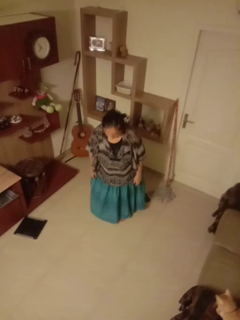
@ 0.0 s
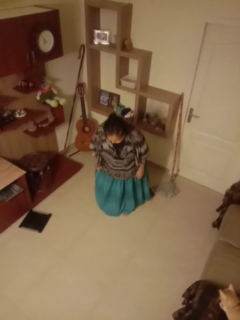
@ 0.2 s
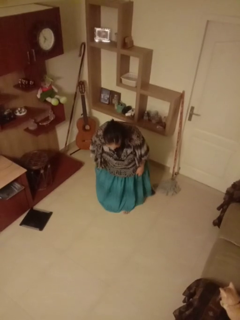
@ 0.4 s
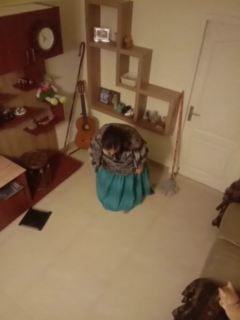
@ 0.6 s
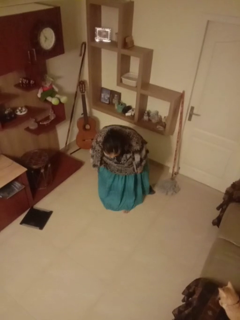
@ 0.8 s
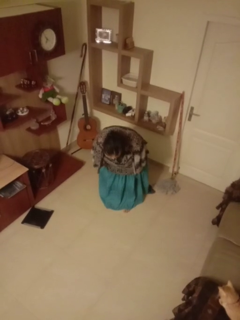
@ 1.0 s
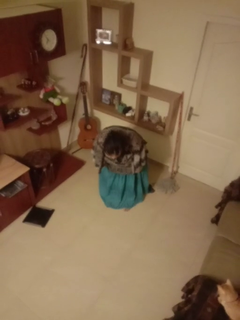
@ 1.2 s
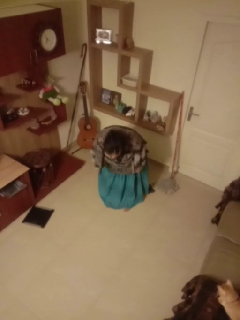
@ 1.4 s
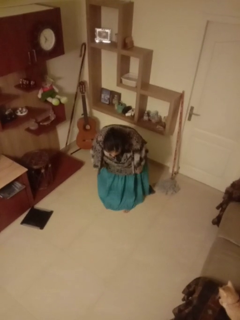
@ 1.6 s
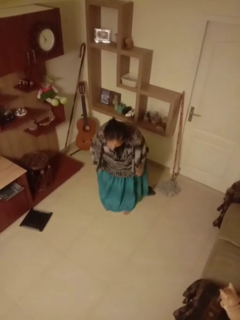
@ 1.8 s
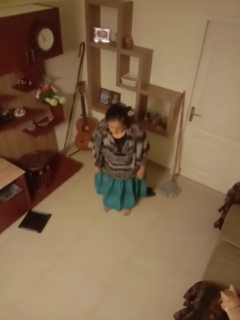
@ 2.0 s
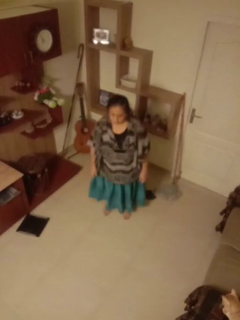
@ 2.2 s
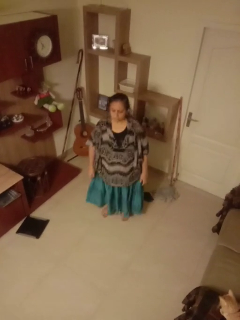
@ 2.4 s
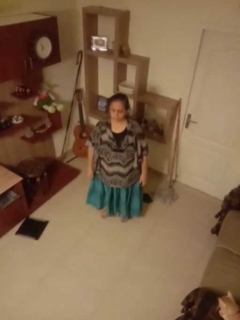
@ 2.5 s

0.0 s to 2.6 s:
person bows

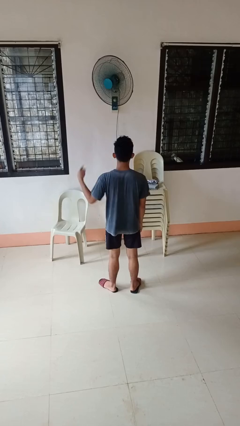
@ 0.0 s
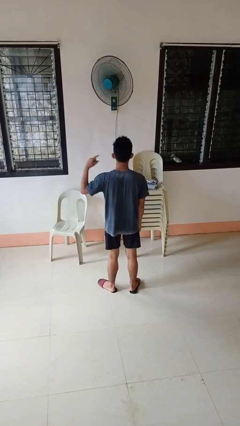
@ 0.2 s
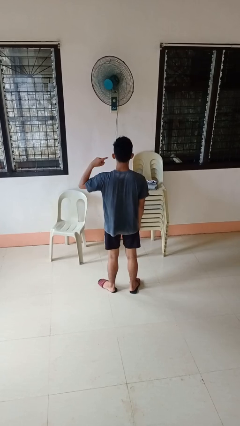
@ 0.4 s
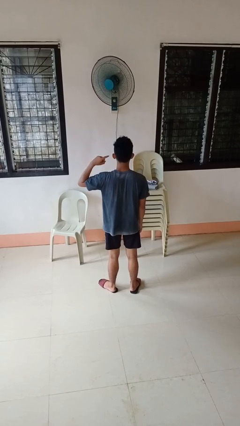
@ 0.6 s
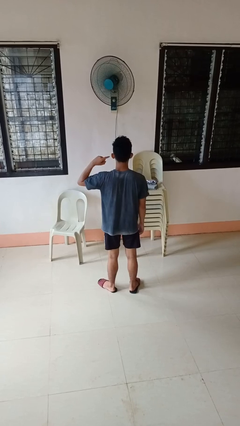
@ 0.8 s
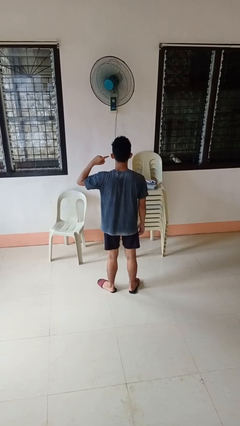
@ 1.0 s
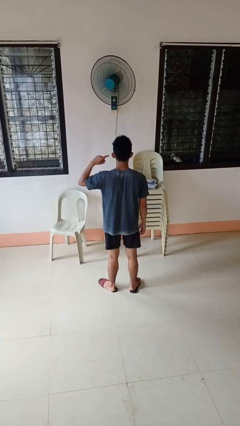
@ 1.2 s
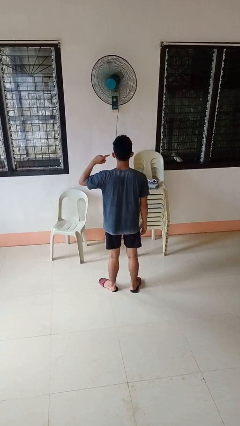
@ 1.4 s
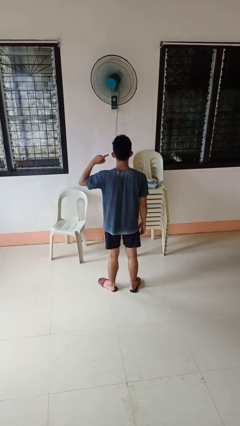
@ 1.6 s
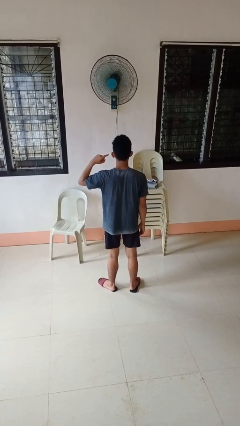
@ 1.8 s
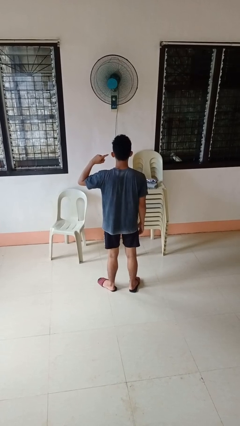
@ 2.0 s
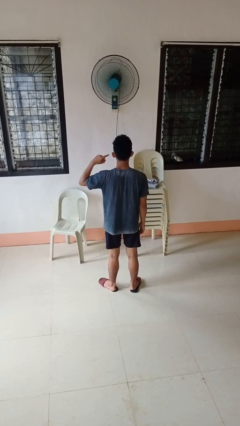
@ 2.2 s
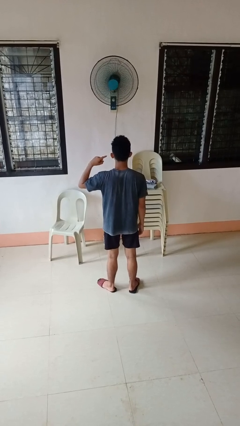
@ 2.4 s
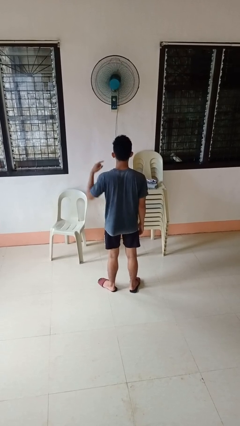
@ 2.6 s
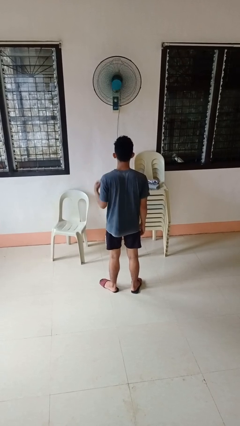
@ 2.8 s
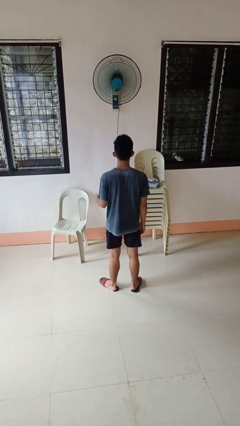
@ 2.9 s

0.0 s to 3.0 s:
person gestures listen closely

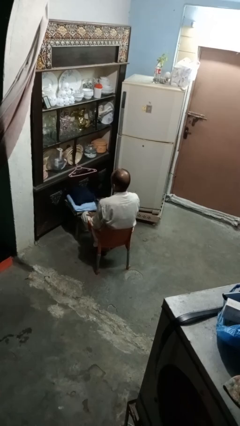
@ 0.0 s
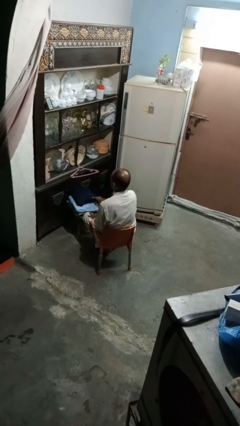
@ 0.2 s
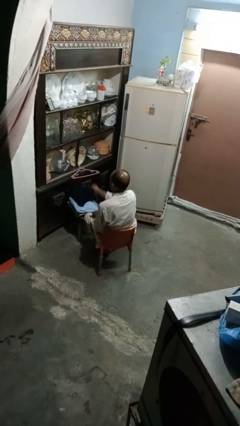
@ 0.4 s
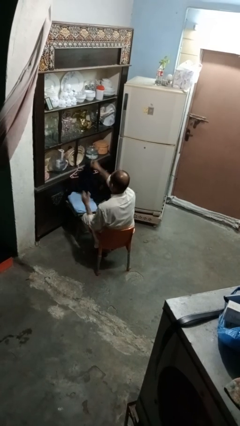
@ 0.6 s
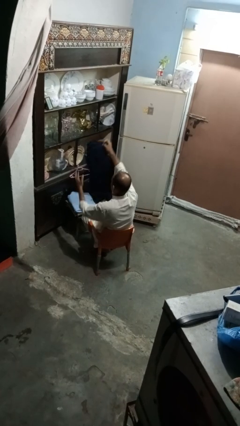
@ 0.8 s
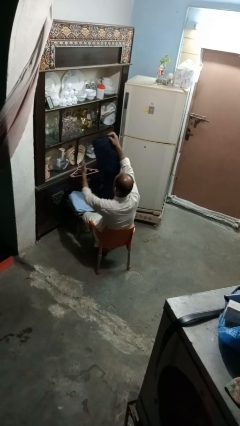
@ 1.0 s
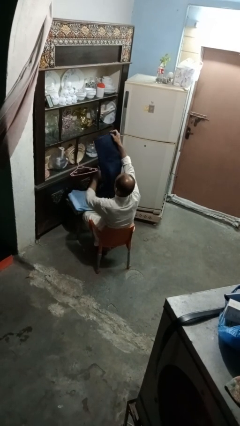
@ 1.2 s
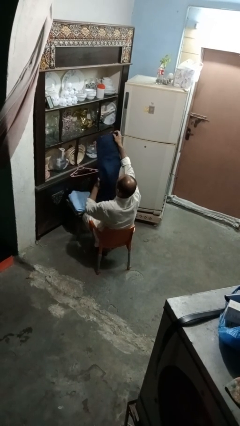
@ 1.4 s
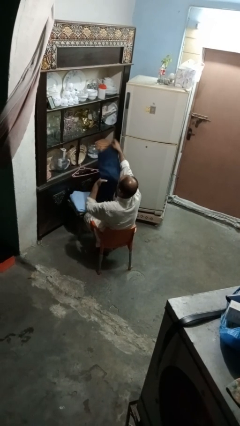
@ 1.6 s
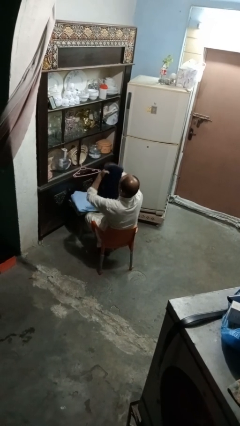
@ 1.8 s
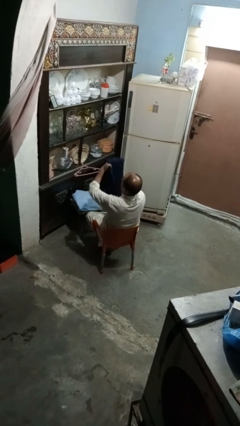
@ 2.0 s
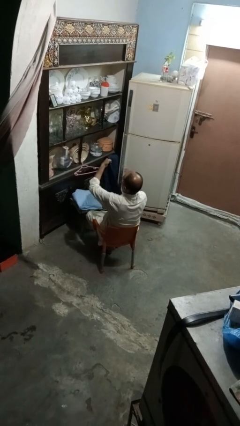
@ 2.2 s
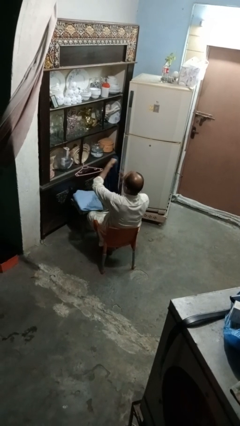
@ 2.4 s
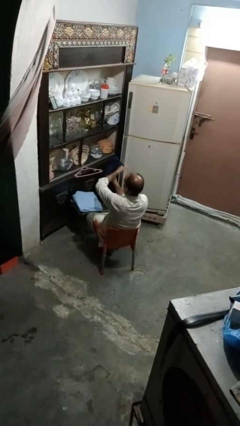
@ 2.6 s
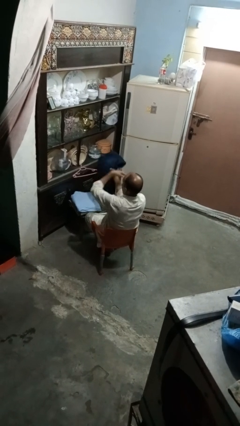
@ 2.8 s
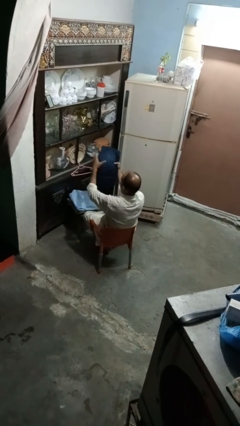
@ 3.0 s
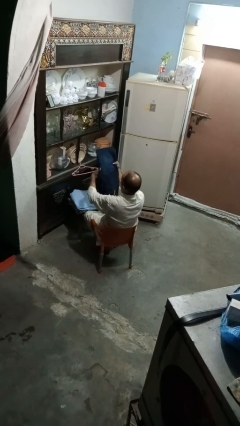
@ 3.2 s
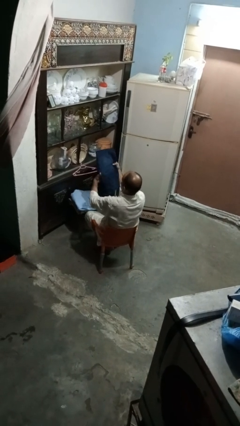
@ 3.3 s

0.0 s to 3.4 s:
person folds pants

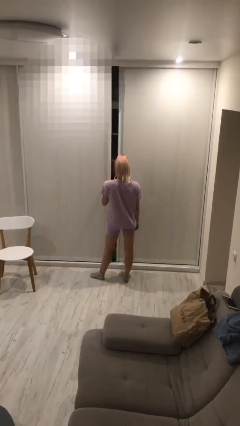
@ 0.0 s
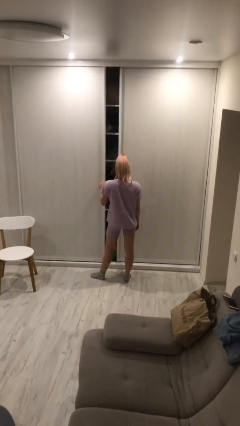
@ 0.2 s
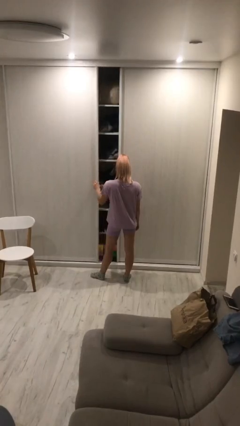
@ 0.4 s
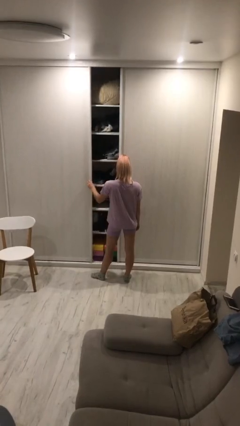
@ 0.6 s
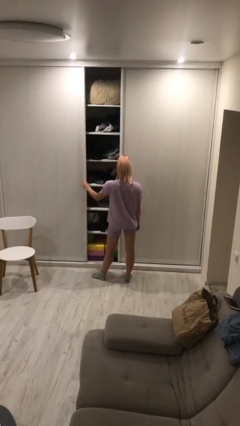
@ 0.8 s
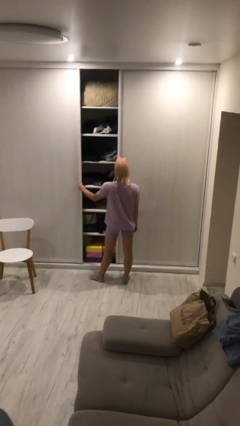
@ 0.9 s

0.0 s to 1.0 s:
person opens sliding door

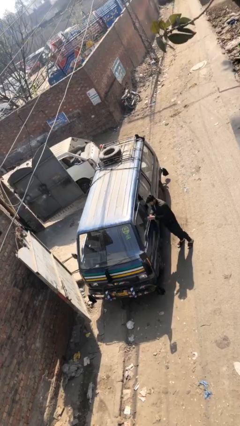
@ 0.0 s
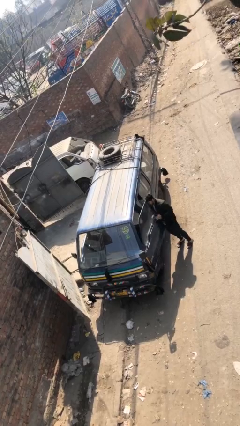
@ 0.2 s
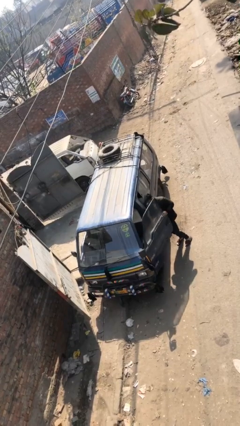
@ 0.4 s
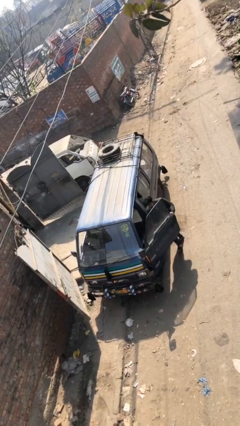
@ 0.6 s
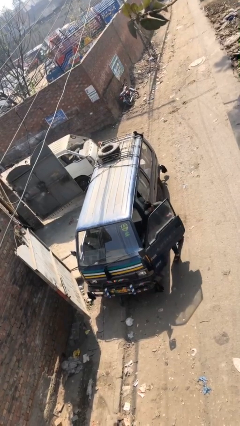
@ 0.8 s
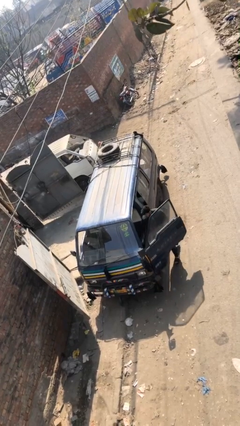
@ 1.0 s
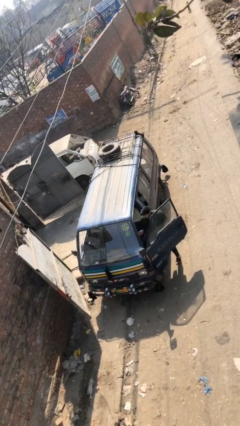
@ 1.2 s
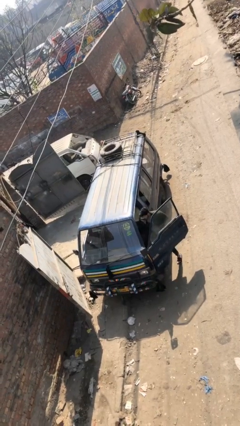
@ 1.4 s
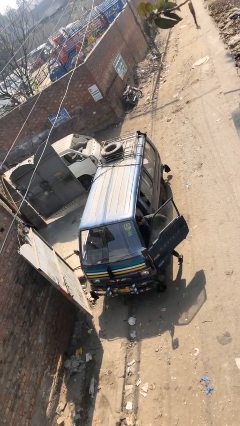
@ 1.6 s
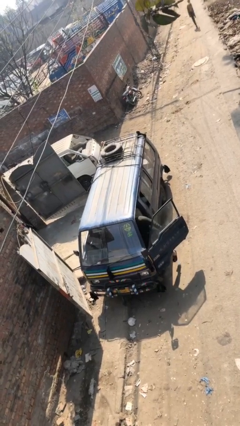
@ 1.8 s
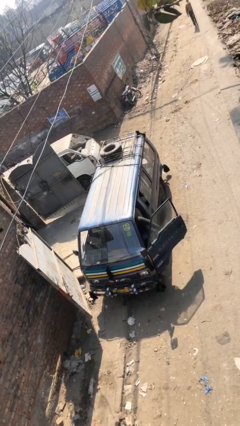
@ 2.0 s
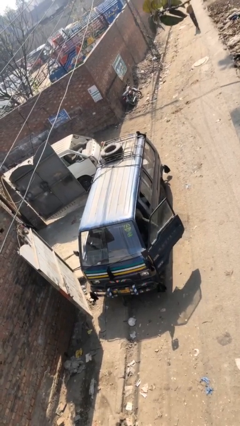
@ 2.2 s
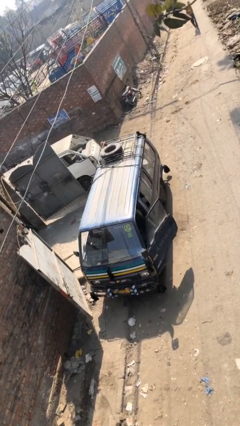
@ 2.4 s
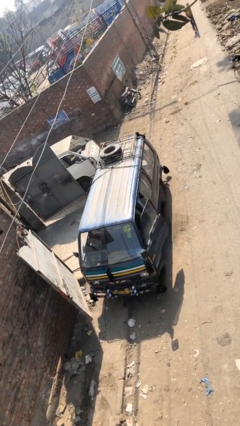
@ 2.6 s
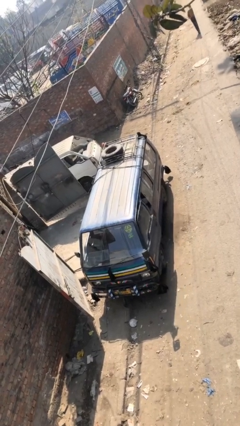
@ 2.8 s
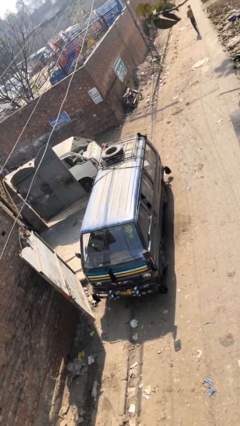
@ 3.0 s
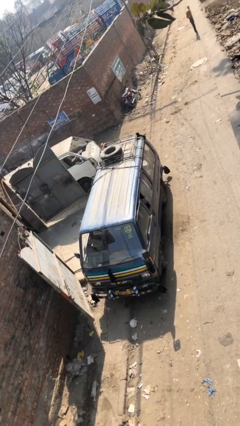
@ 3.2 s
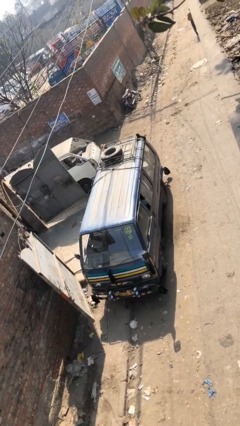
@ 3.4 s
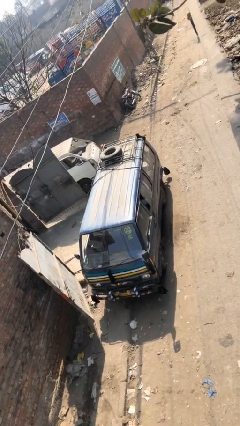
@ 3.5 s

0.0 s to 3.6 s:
car picks up person

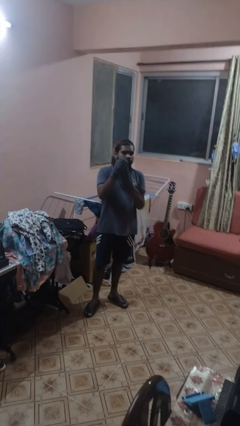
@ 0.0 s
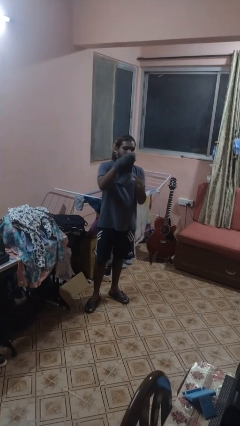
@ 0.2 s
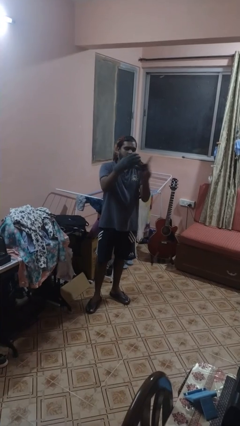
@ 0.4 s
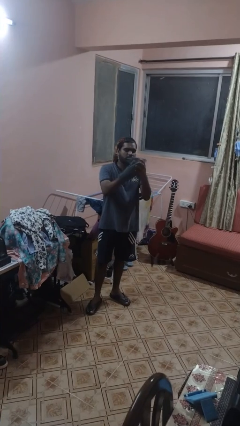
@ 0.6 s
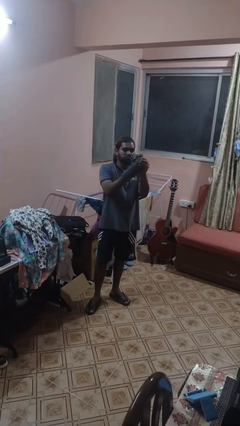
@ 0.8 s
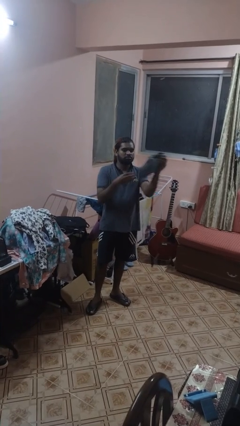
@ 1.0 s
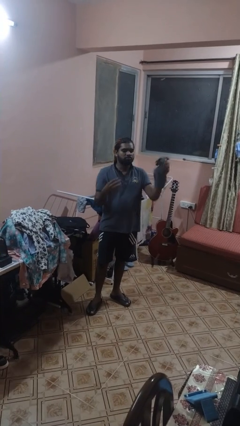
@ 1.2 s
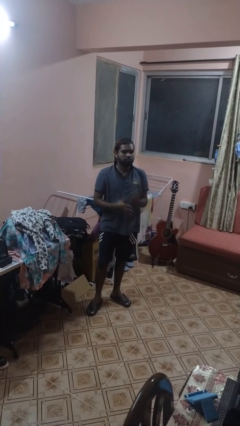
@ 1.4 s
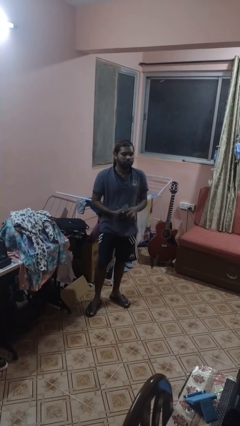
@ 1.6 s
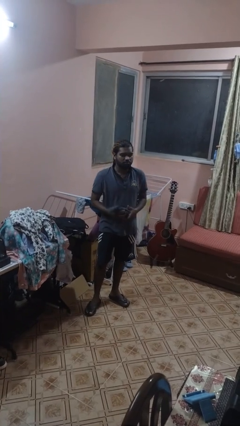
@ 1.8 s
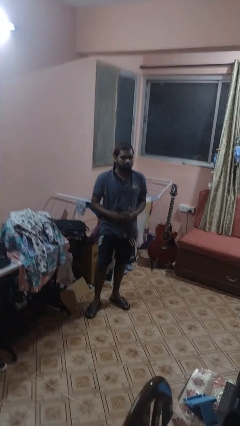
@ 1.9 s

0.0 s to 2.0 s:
person takes off gloves

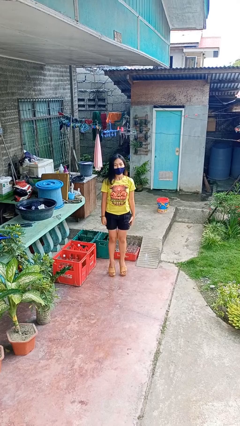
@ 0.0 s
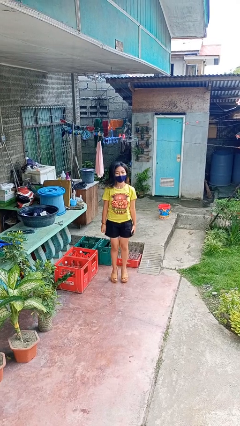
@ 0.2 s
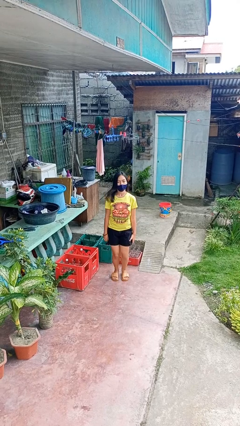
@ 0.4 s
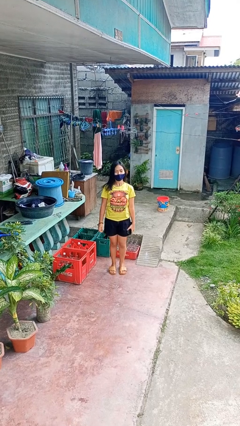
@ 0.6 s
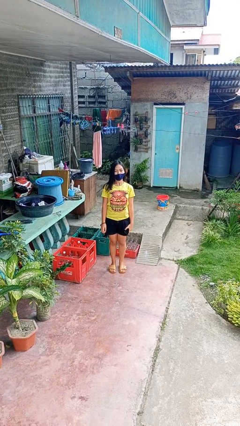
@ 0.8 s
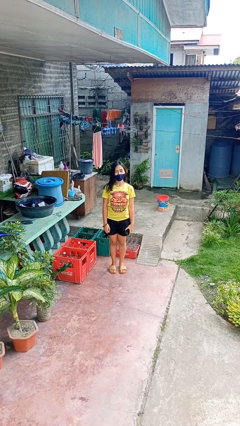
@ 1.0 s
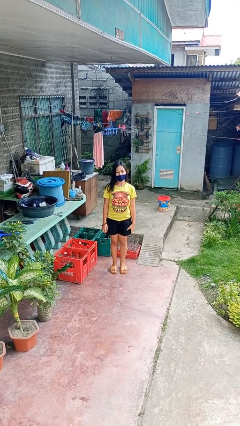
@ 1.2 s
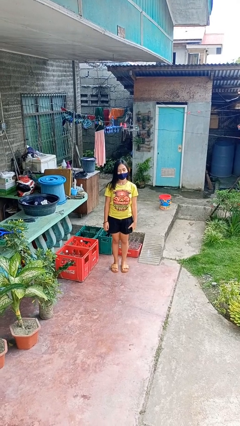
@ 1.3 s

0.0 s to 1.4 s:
person jumps

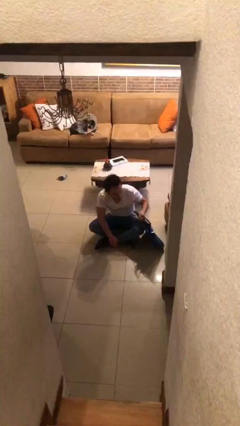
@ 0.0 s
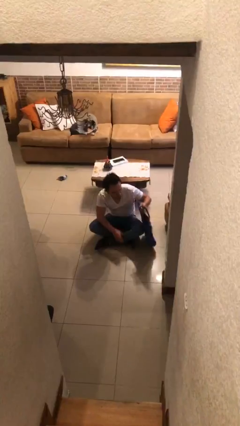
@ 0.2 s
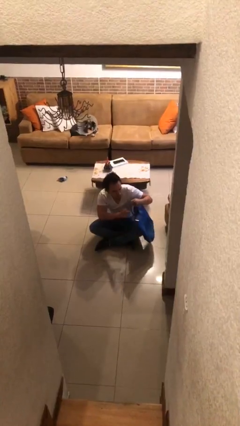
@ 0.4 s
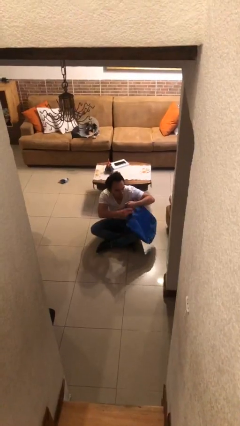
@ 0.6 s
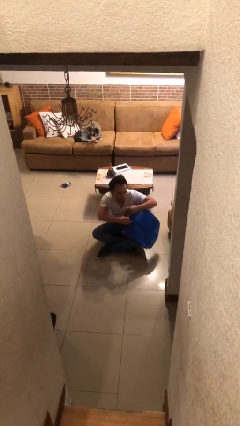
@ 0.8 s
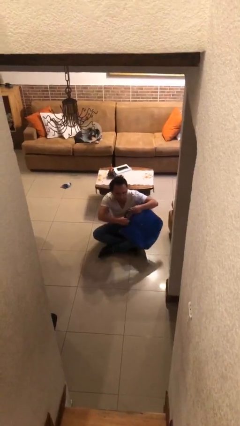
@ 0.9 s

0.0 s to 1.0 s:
person picks up object from floor
